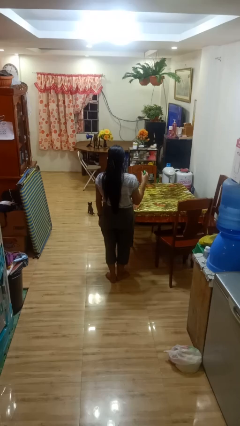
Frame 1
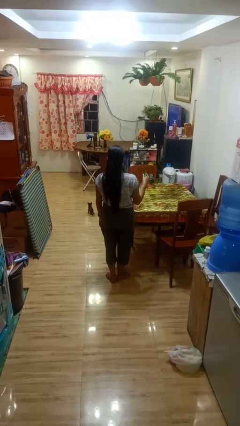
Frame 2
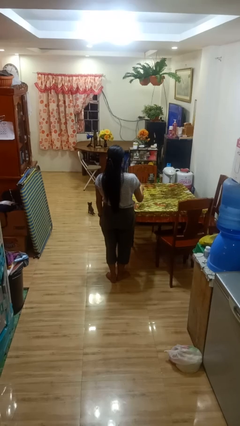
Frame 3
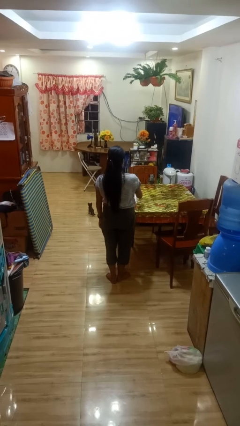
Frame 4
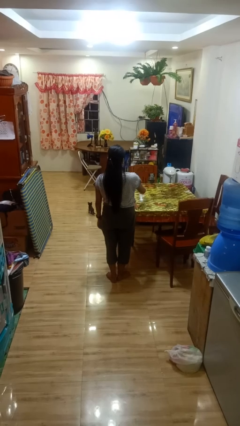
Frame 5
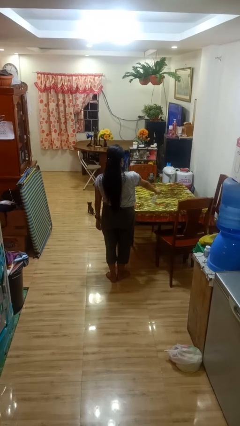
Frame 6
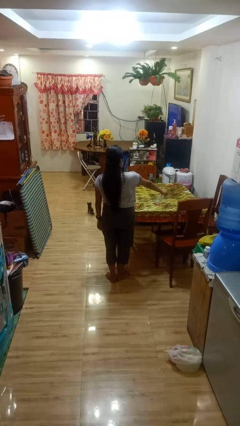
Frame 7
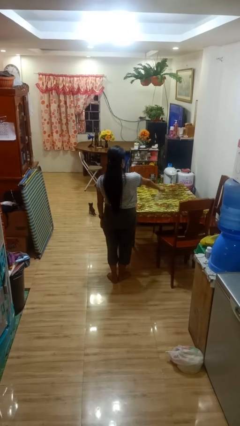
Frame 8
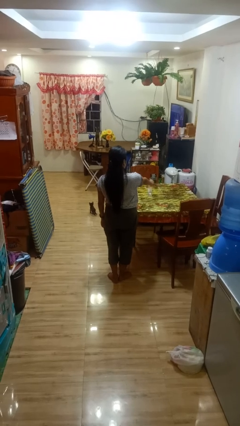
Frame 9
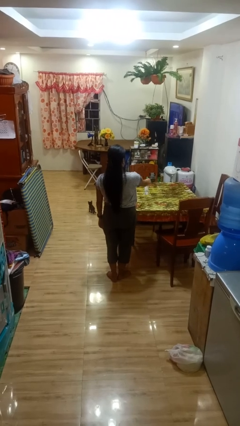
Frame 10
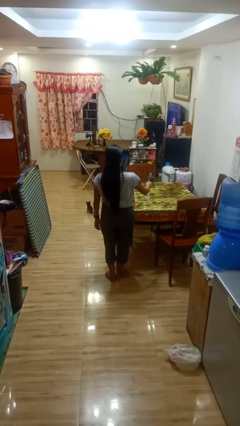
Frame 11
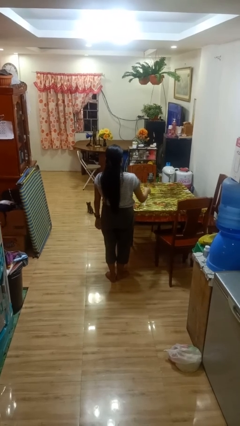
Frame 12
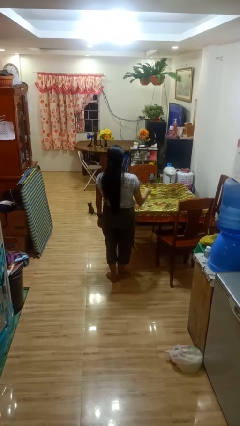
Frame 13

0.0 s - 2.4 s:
person sprays from bottle

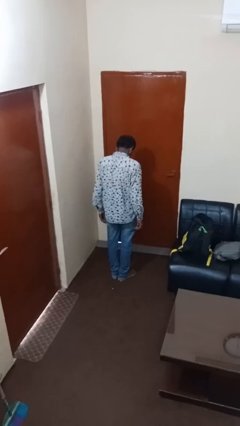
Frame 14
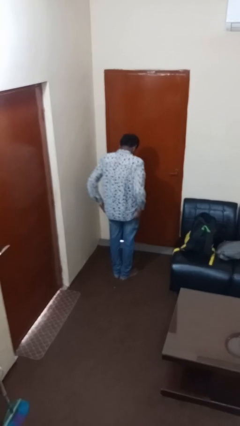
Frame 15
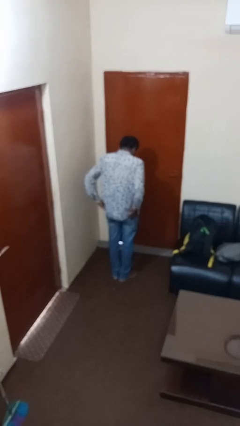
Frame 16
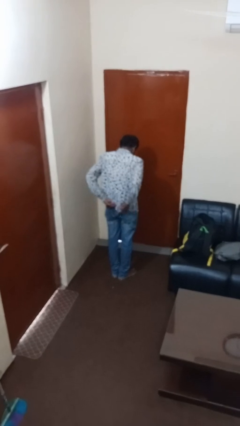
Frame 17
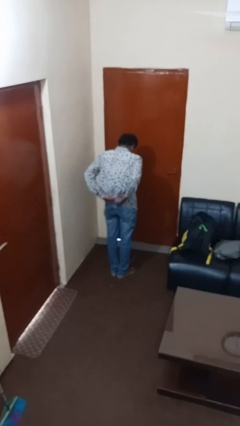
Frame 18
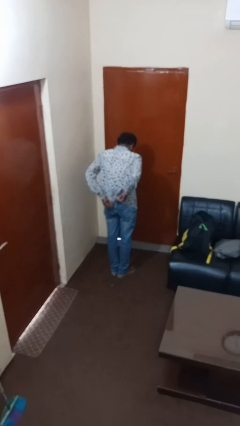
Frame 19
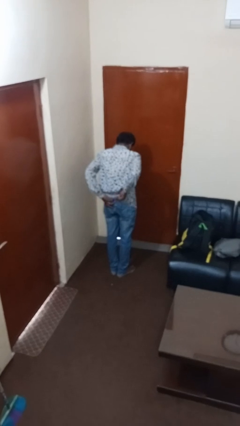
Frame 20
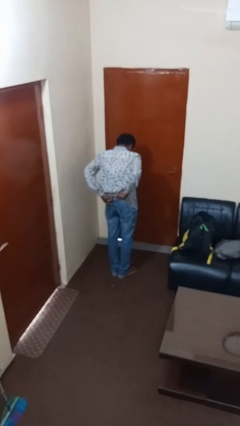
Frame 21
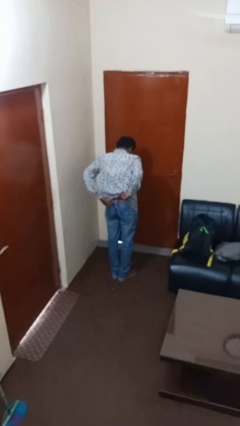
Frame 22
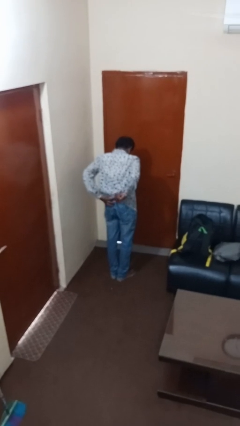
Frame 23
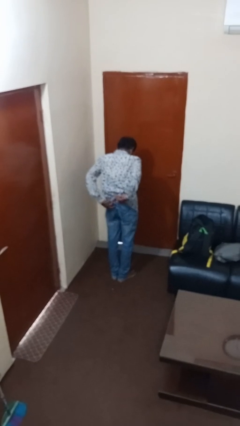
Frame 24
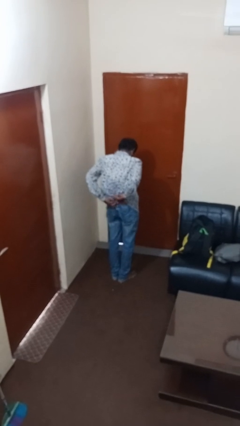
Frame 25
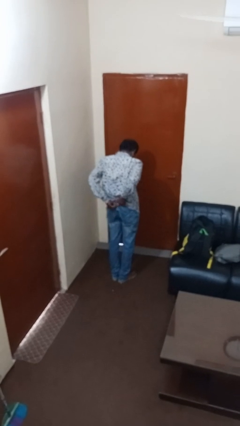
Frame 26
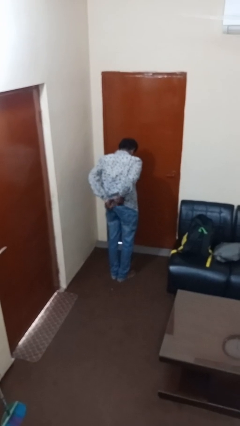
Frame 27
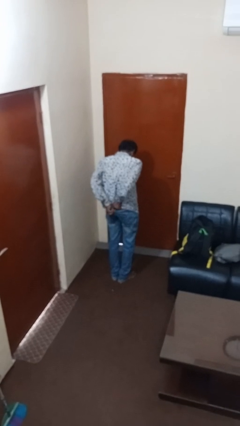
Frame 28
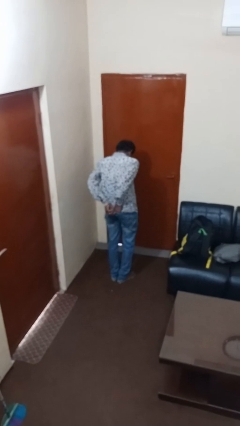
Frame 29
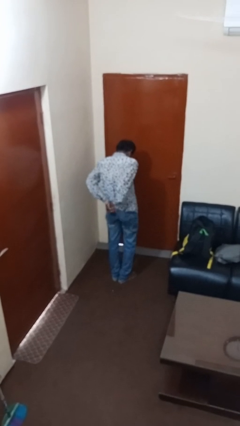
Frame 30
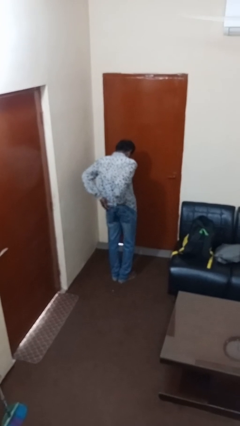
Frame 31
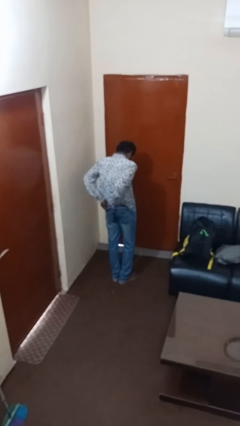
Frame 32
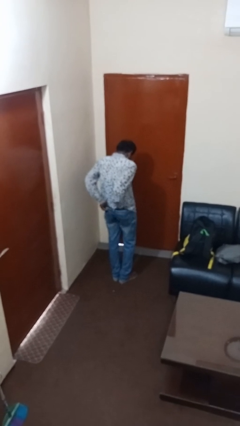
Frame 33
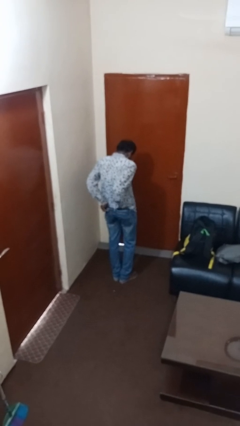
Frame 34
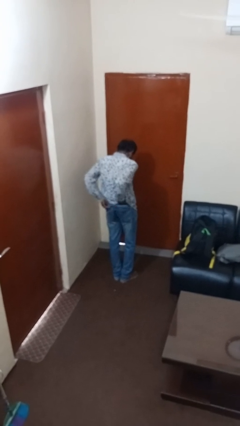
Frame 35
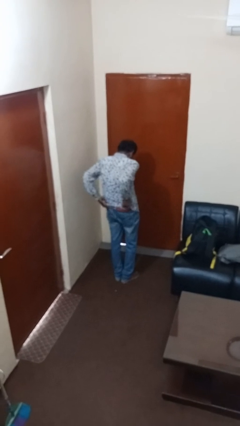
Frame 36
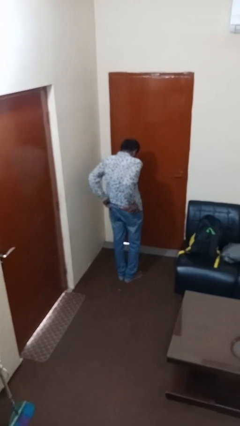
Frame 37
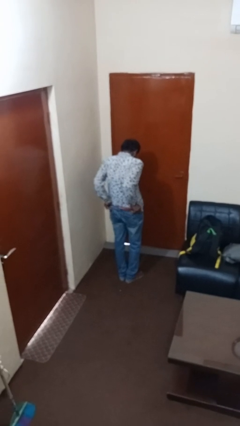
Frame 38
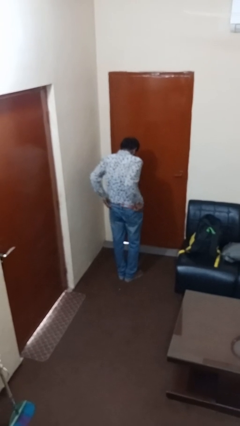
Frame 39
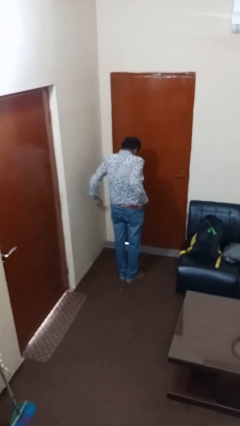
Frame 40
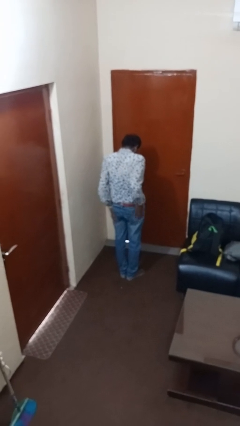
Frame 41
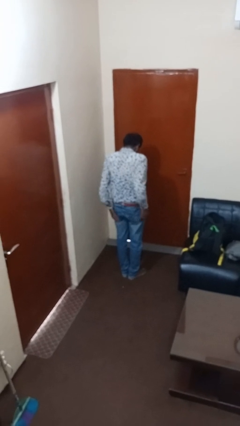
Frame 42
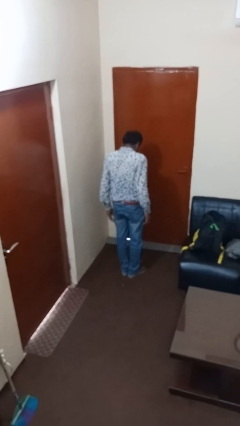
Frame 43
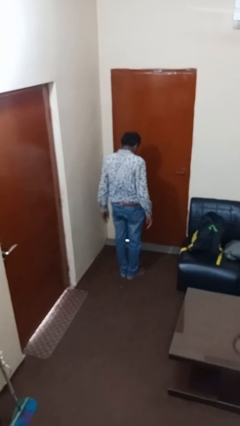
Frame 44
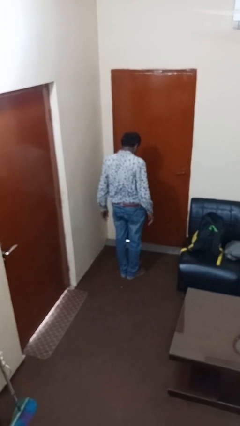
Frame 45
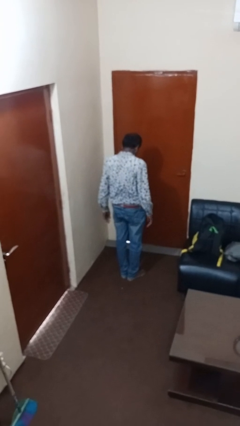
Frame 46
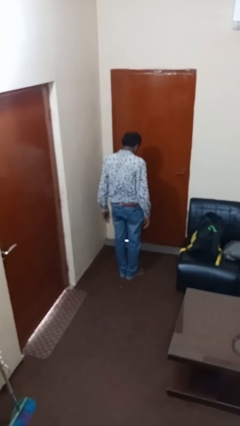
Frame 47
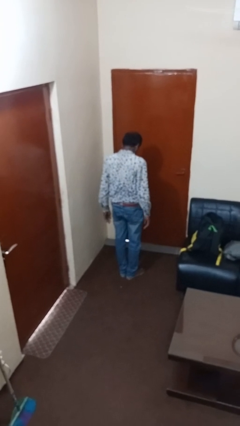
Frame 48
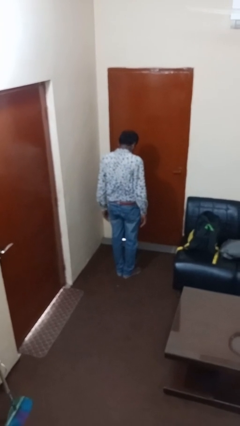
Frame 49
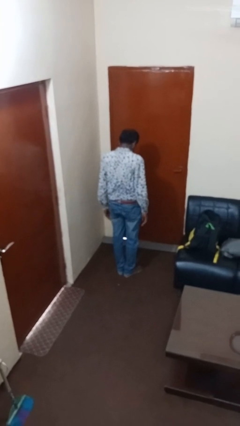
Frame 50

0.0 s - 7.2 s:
person tucks in shirt

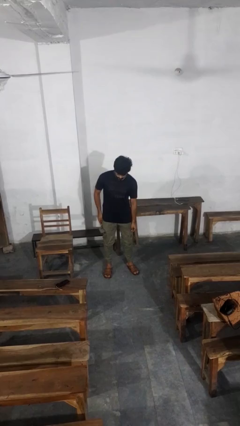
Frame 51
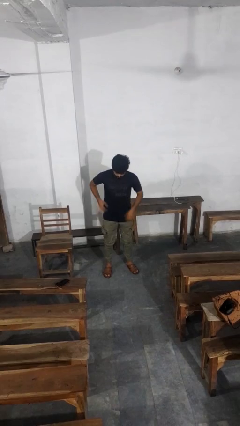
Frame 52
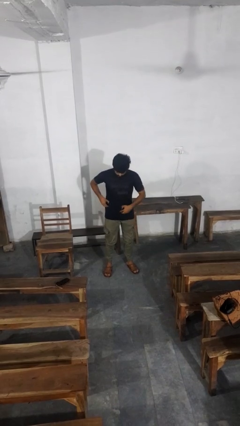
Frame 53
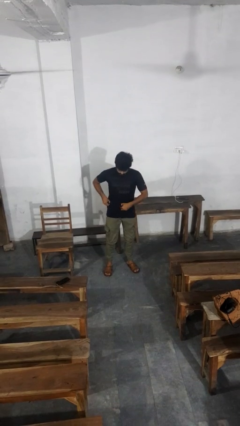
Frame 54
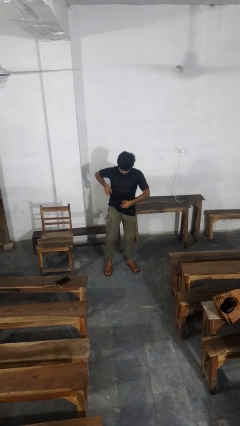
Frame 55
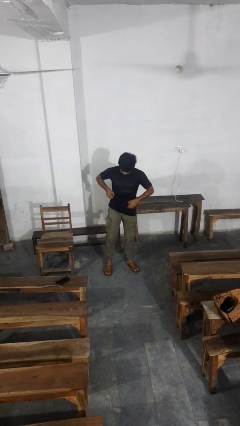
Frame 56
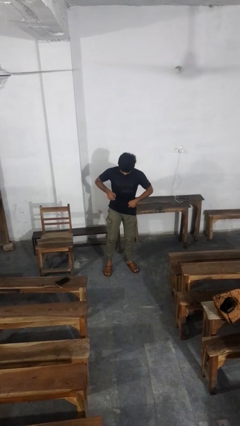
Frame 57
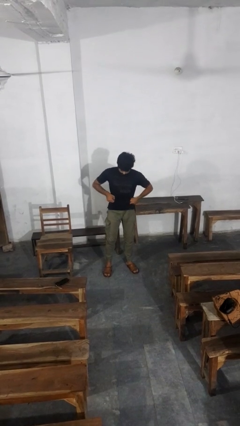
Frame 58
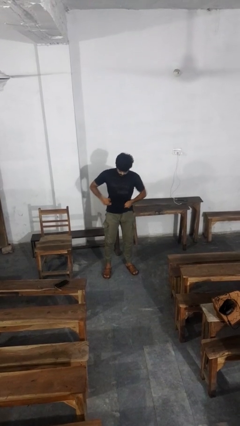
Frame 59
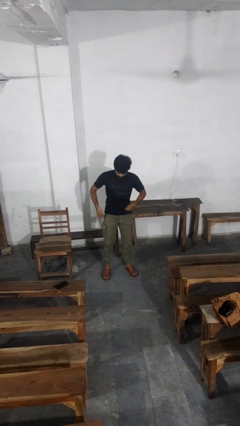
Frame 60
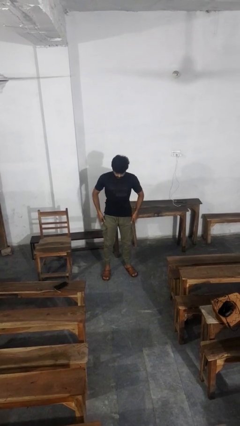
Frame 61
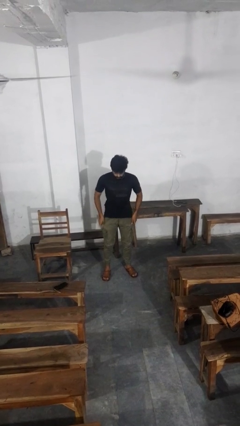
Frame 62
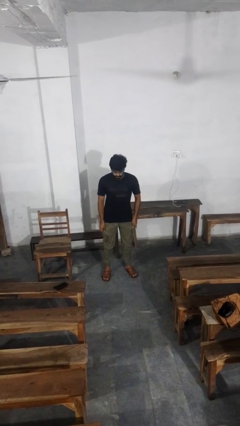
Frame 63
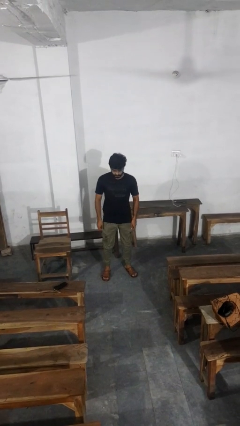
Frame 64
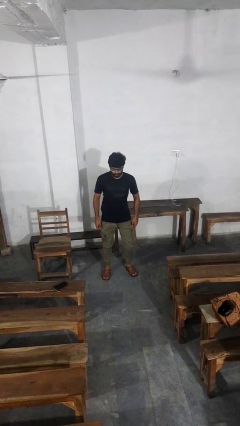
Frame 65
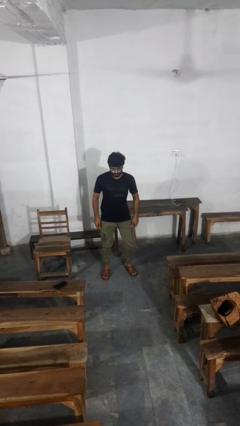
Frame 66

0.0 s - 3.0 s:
person hikes up pants

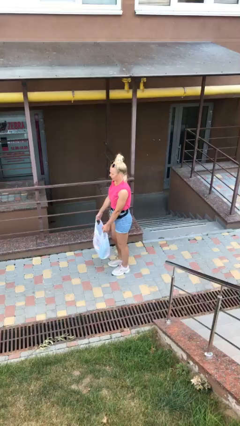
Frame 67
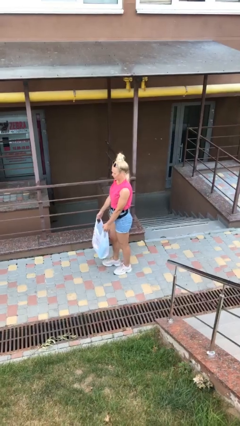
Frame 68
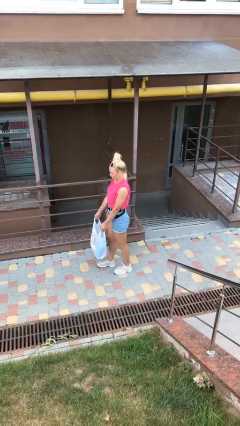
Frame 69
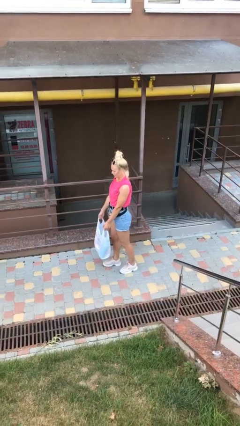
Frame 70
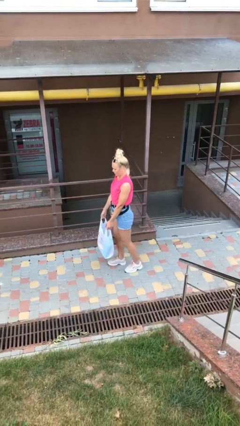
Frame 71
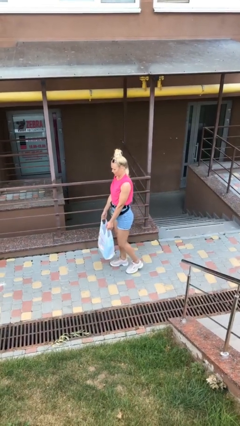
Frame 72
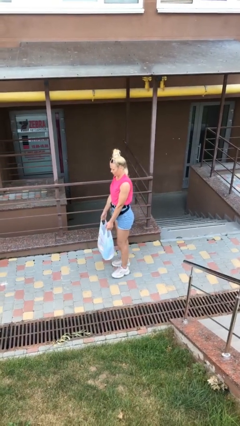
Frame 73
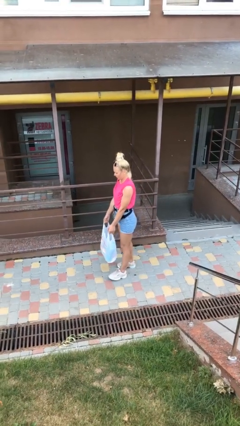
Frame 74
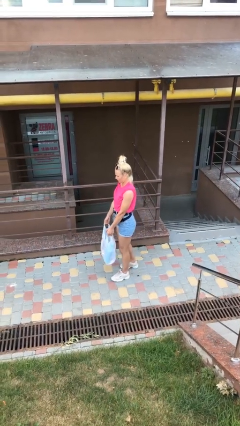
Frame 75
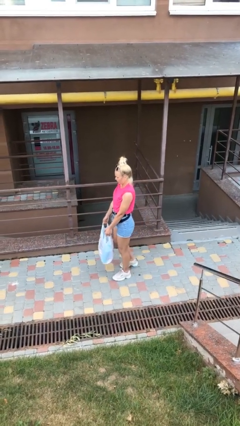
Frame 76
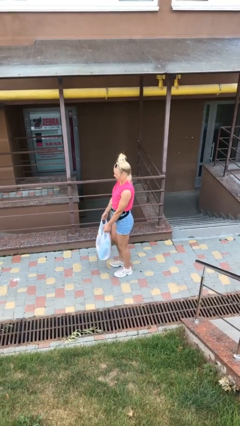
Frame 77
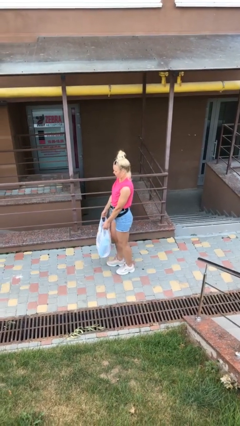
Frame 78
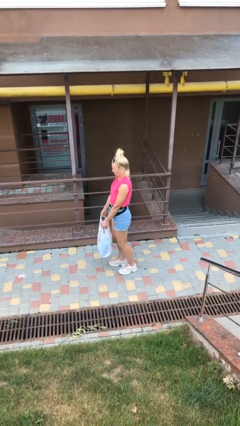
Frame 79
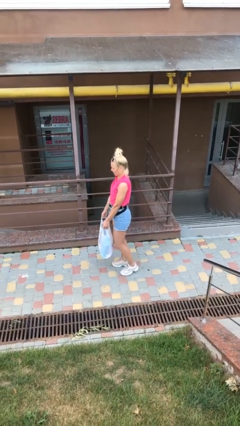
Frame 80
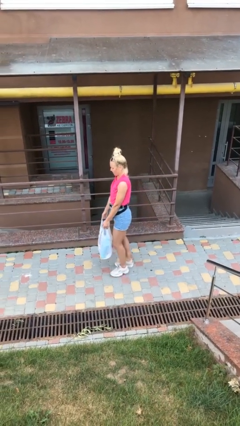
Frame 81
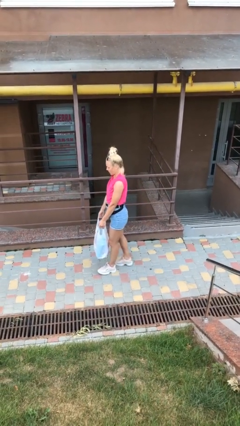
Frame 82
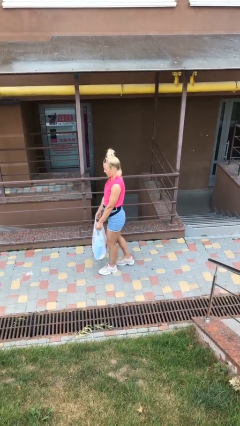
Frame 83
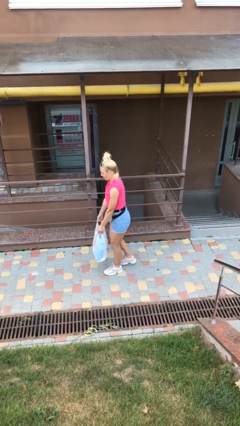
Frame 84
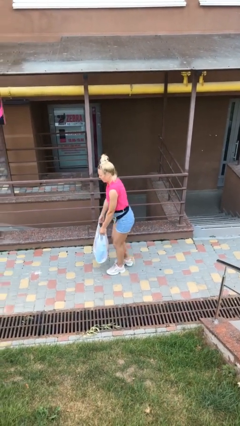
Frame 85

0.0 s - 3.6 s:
person carries heavy object

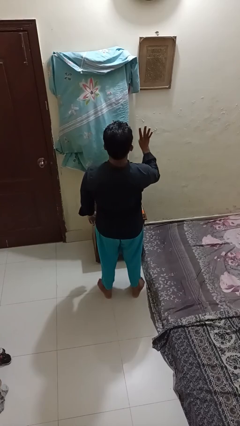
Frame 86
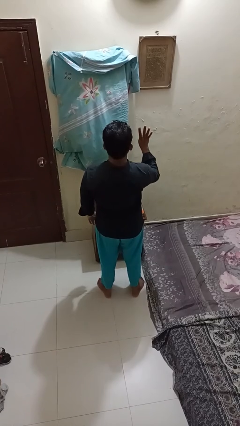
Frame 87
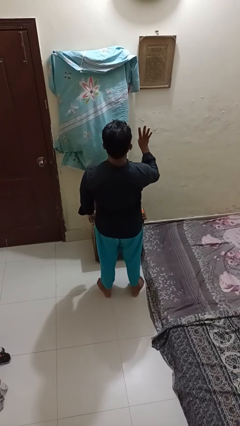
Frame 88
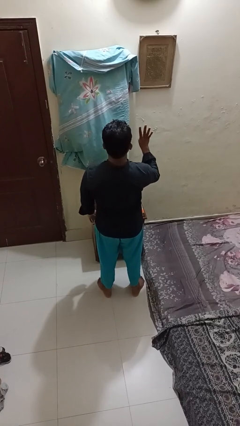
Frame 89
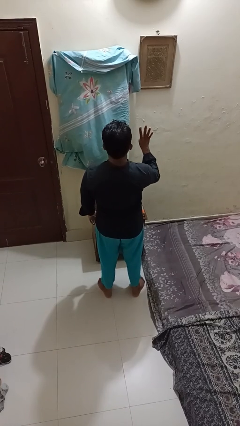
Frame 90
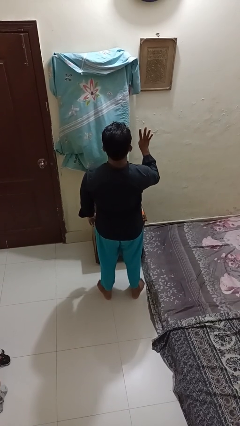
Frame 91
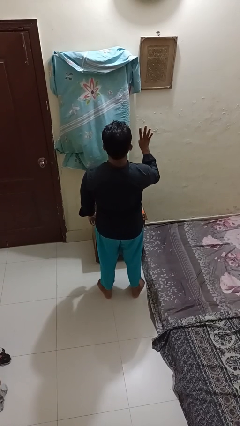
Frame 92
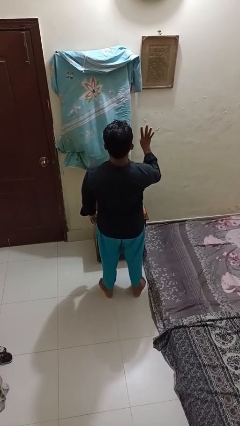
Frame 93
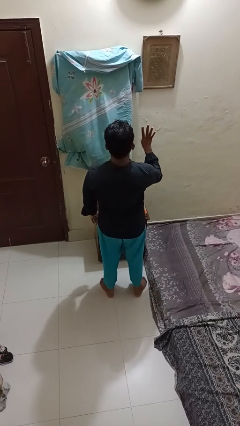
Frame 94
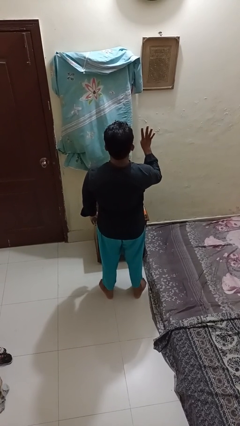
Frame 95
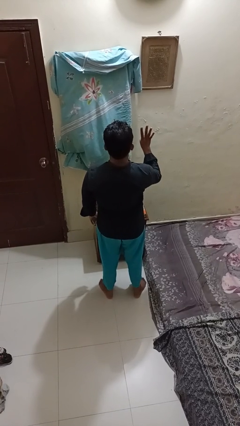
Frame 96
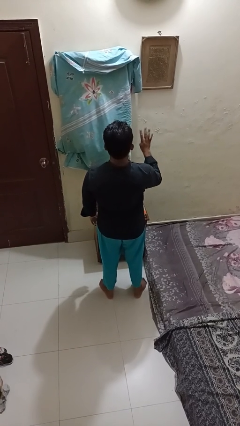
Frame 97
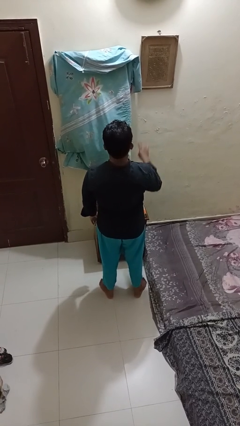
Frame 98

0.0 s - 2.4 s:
person gestures number four
